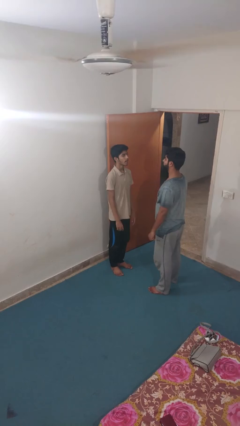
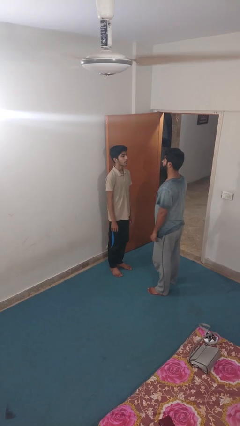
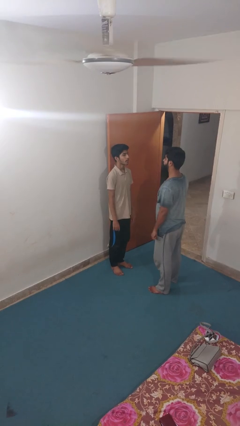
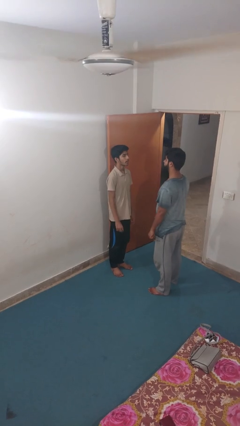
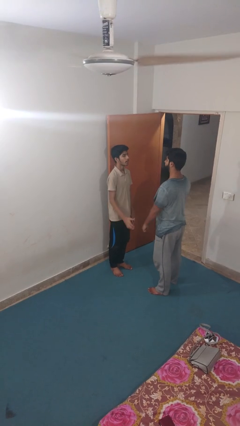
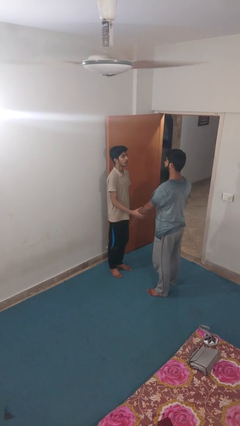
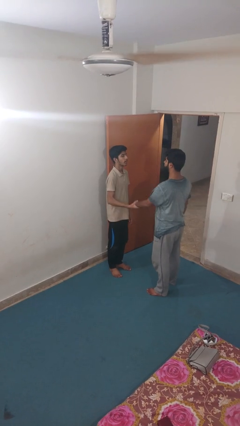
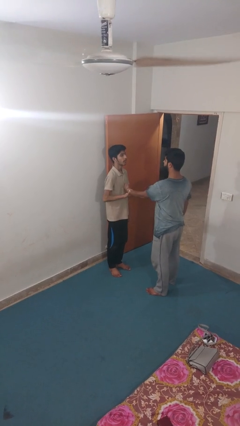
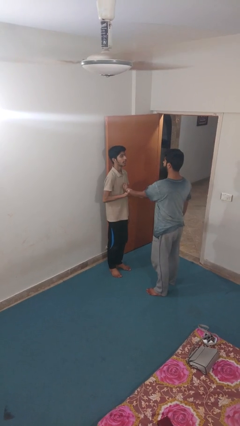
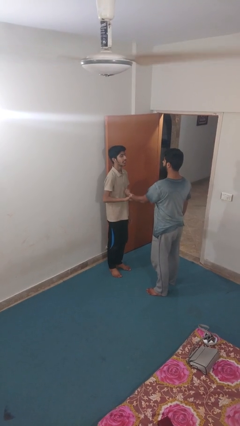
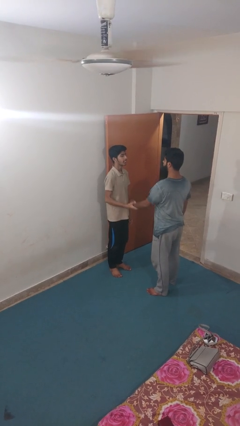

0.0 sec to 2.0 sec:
person grabs person by forearm

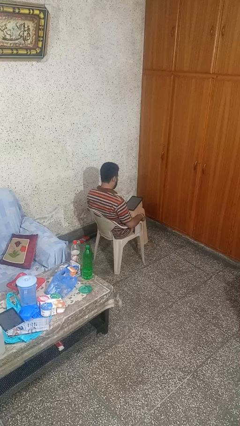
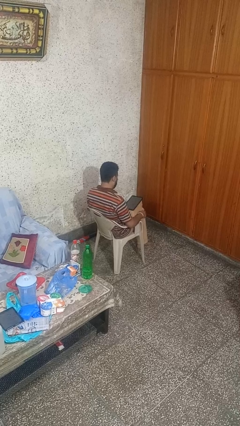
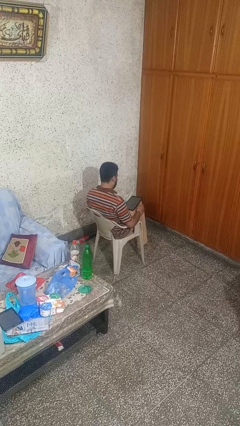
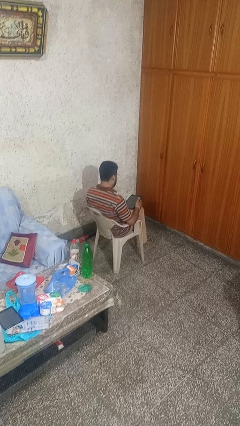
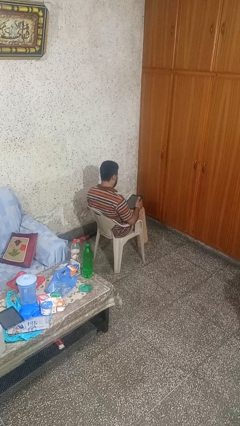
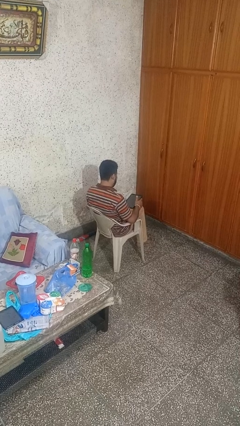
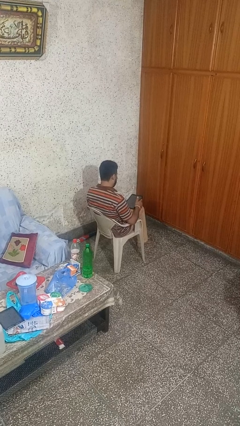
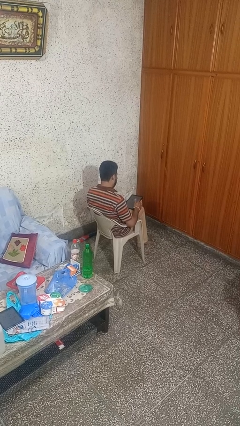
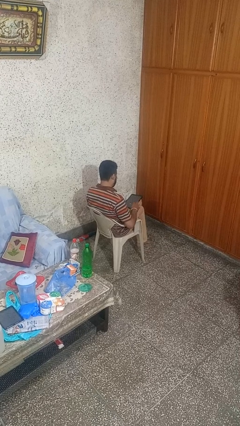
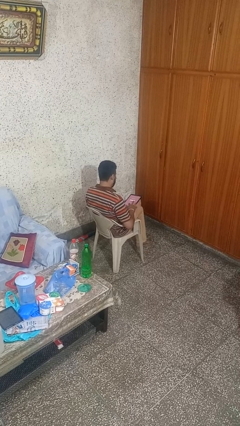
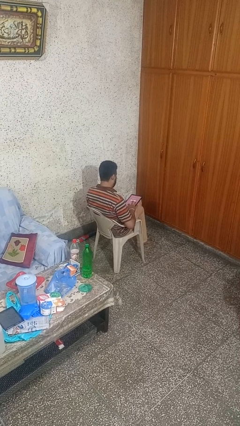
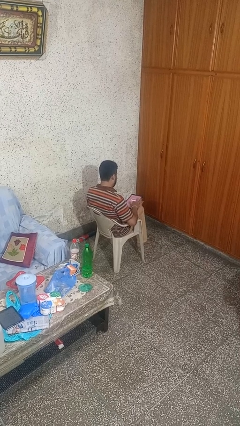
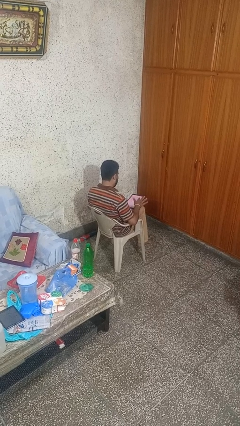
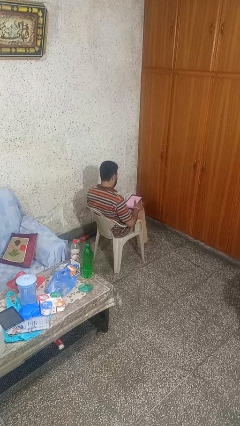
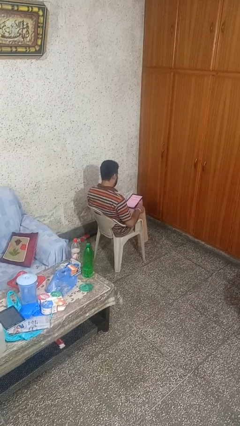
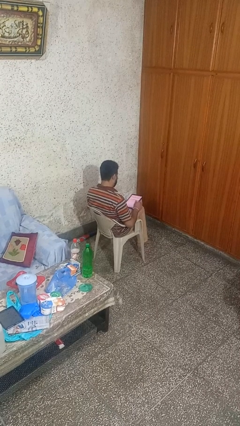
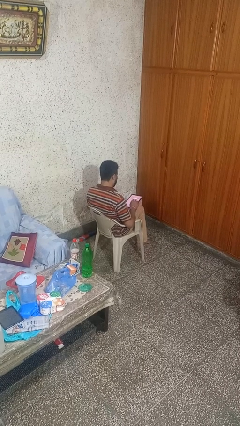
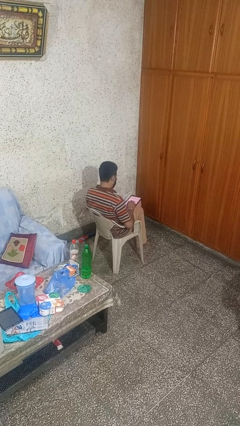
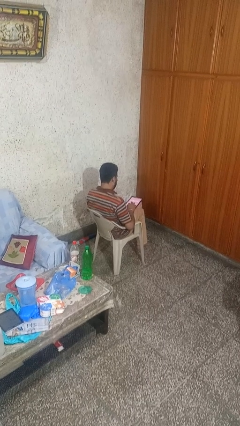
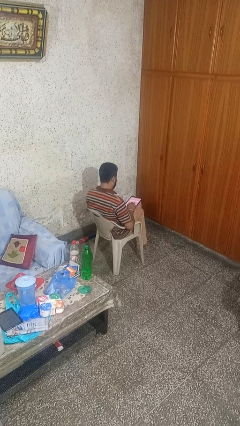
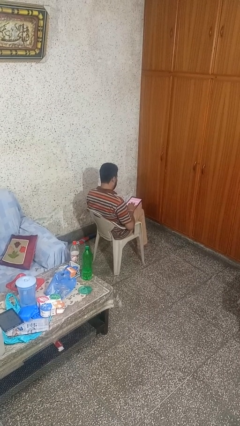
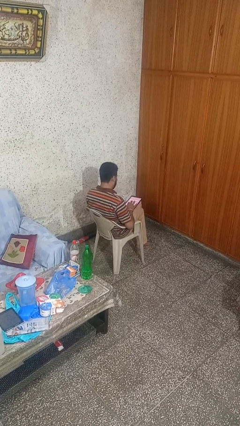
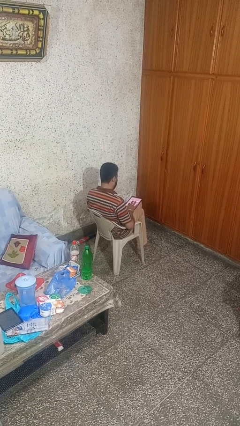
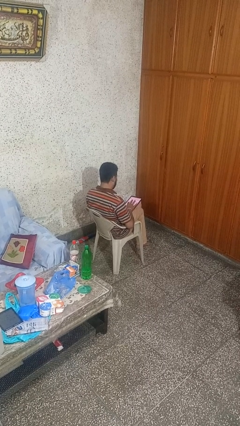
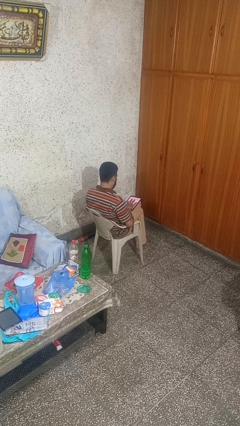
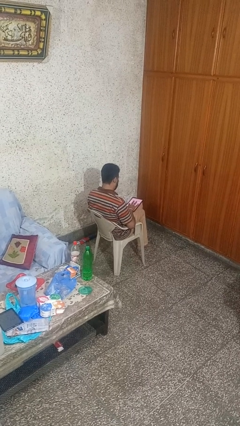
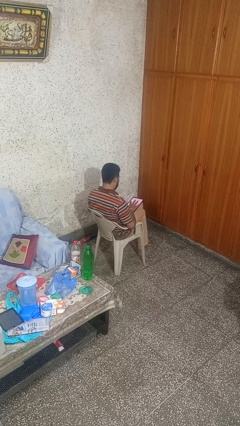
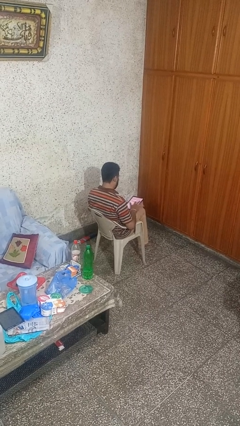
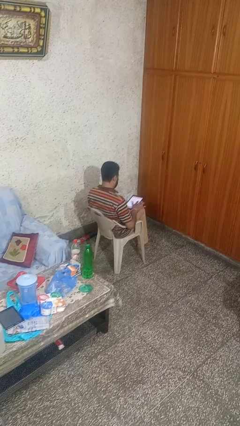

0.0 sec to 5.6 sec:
person interacts with tablet

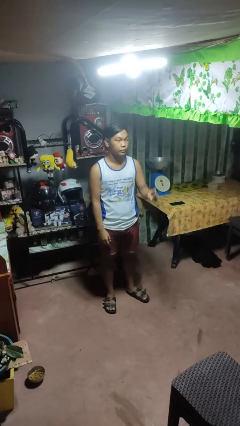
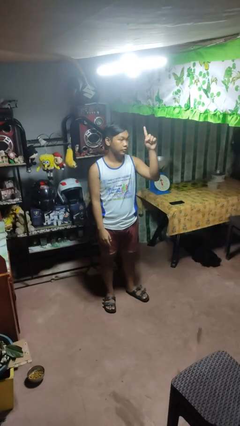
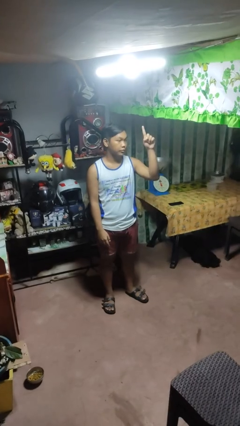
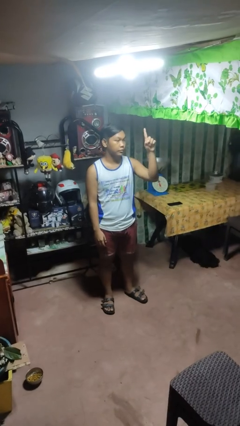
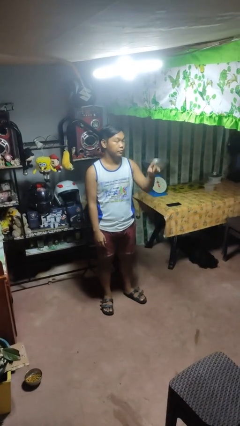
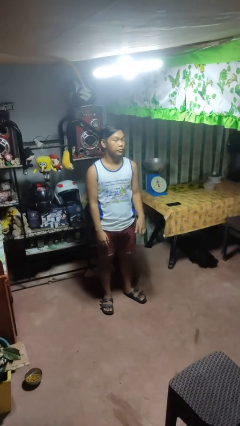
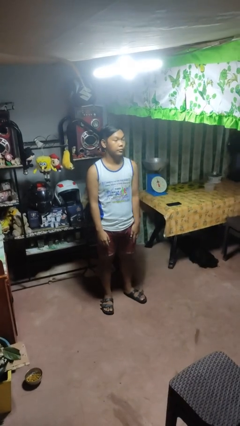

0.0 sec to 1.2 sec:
person gestures number one

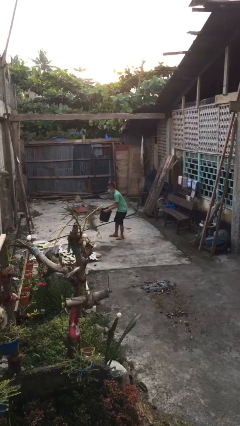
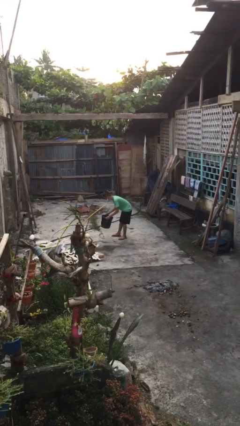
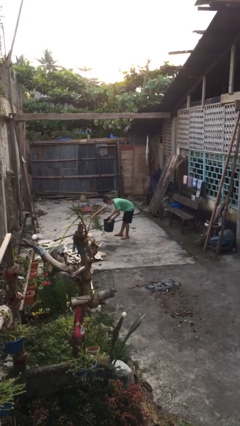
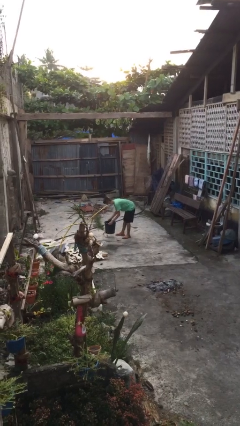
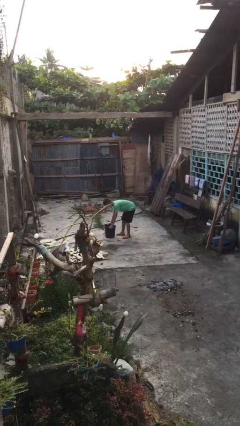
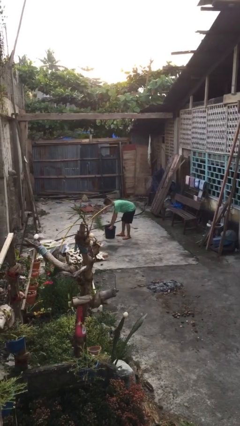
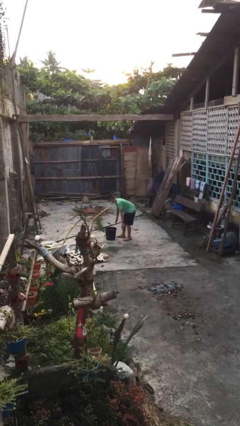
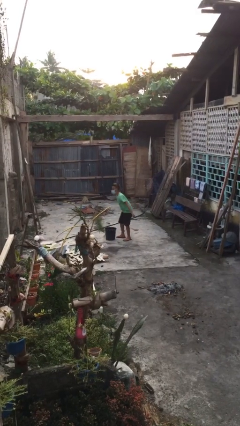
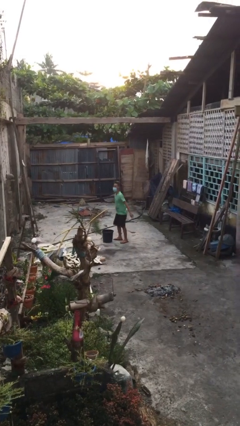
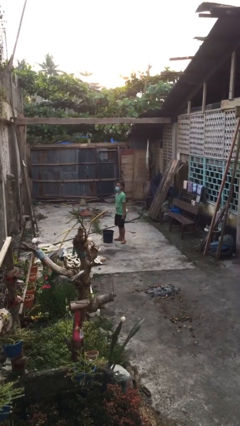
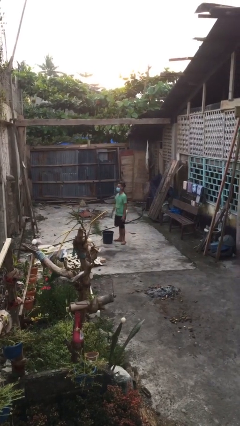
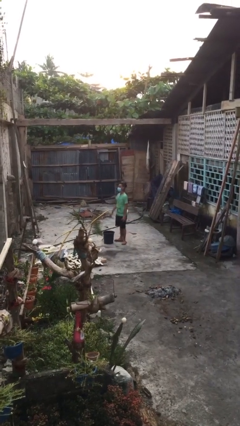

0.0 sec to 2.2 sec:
person puts down object on floor

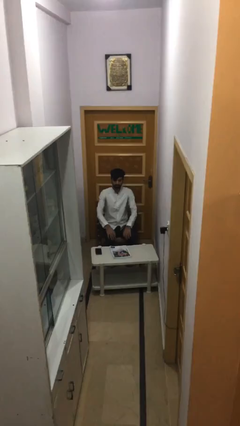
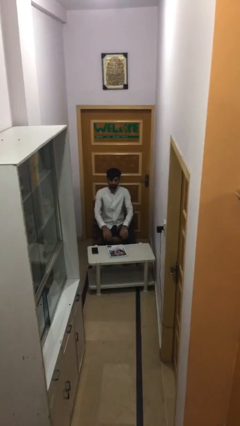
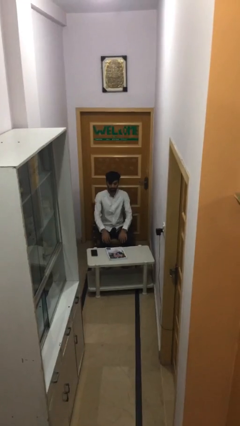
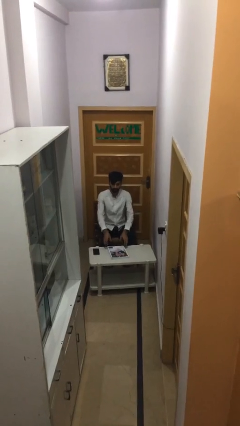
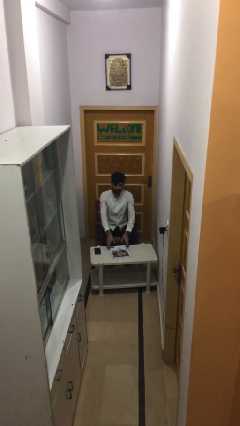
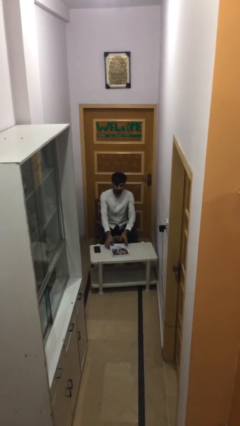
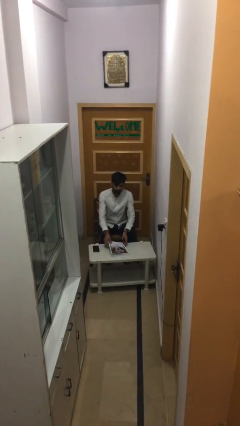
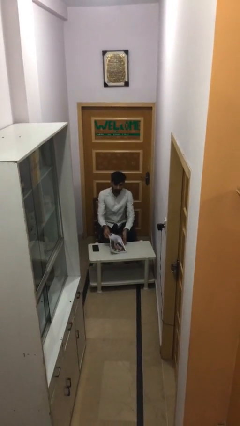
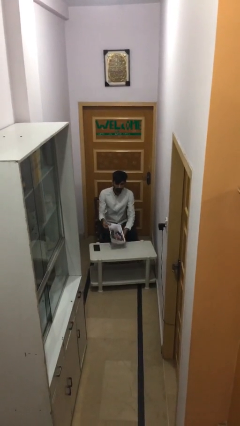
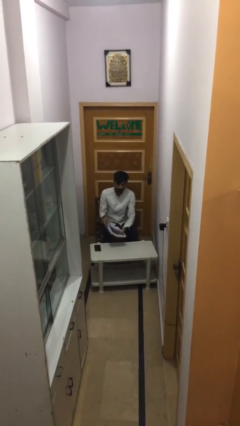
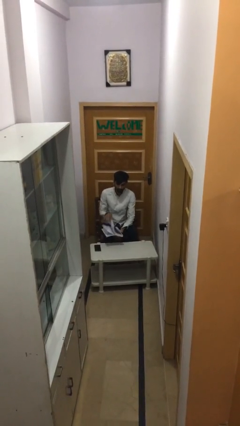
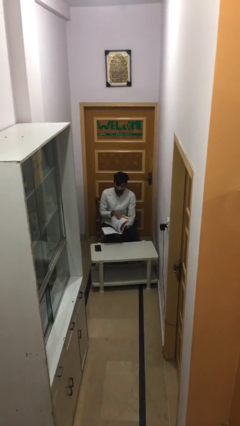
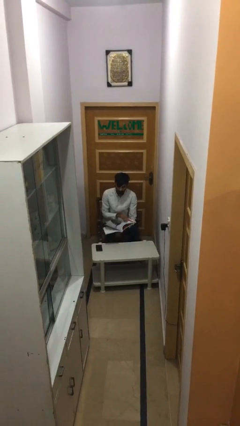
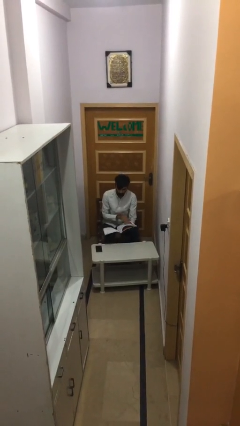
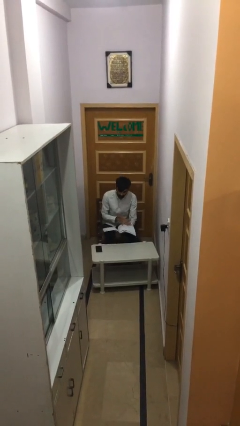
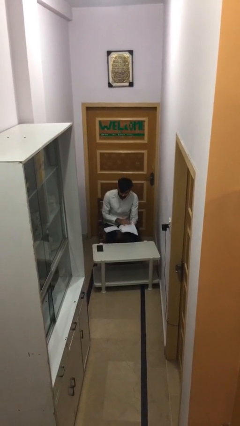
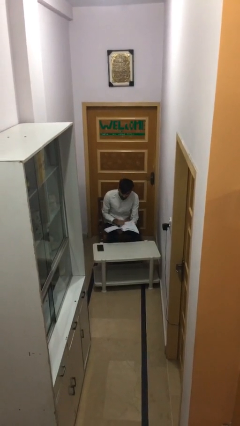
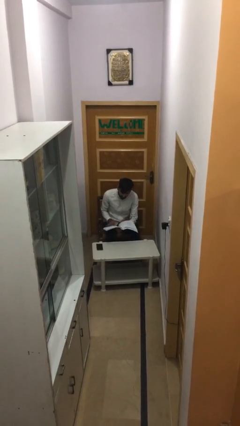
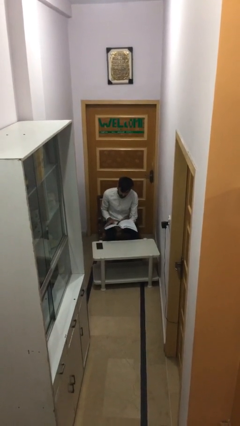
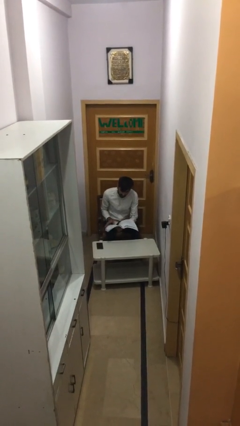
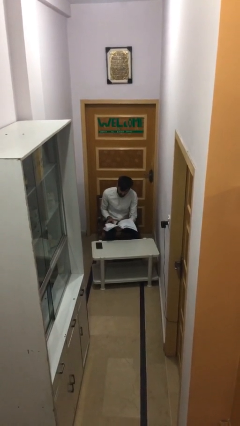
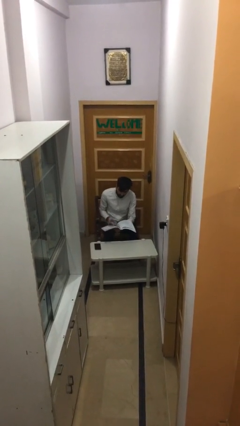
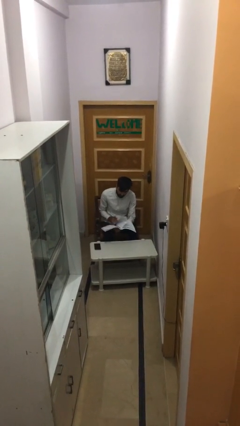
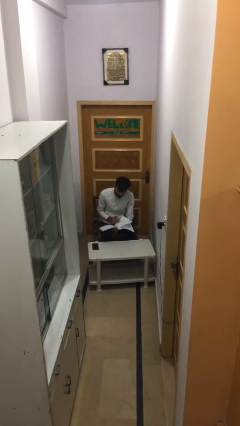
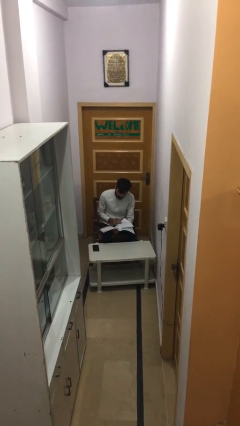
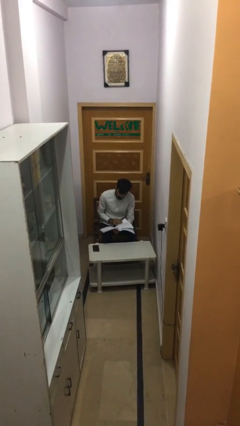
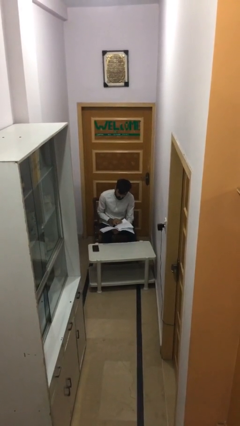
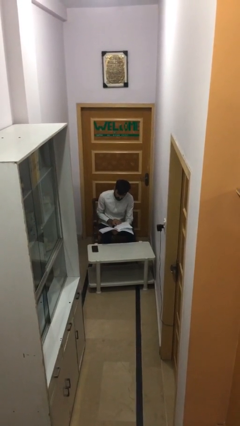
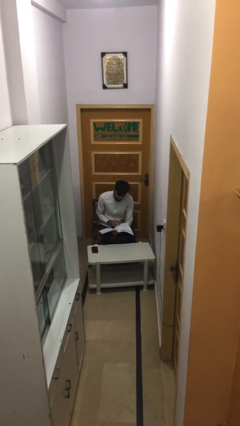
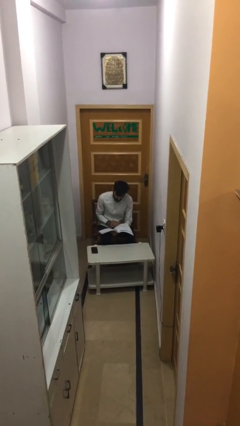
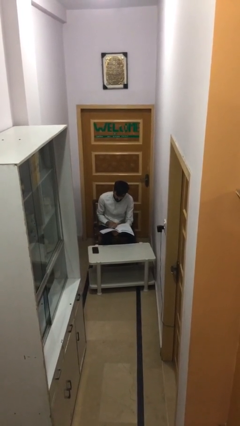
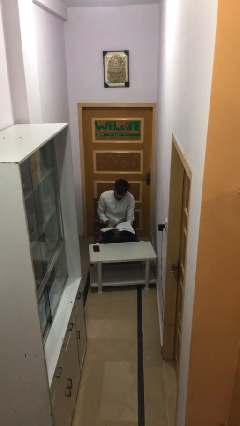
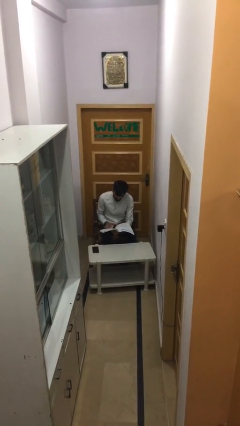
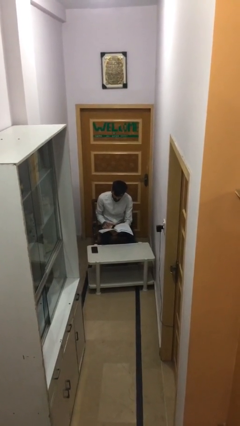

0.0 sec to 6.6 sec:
person reads document
